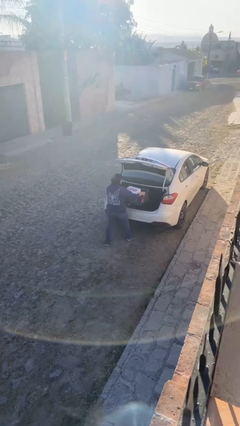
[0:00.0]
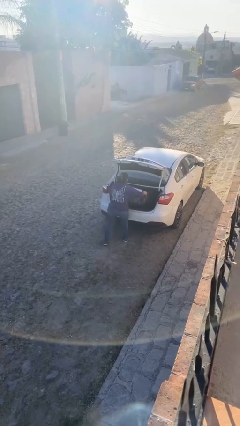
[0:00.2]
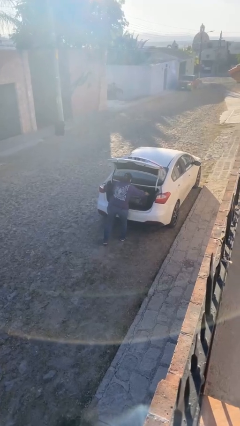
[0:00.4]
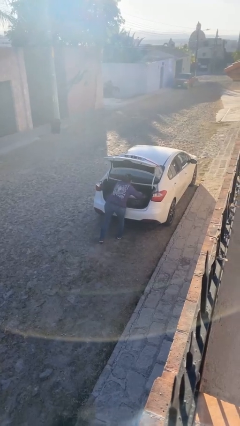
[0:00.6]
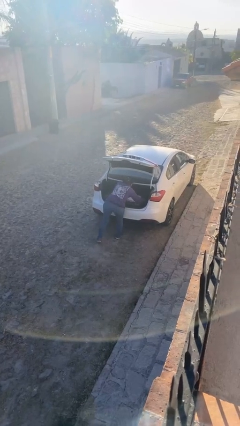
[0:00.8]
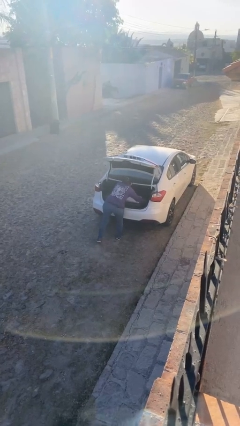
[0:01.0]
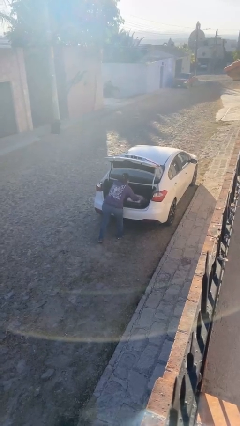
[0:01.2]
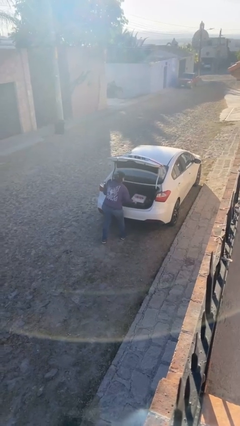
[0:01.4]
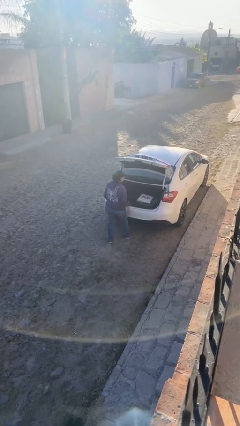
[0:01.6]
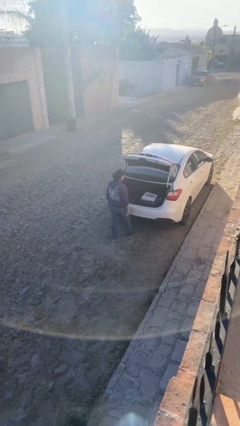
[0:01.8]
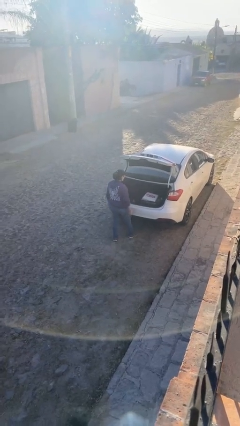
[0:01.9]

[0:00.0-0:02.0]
person loads car

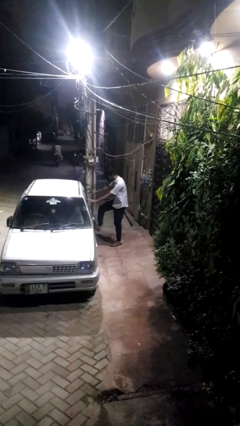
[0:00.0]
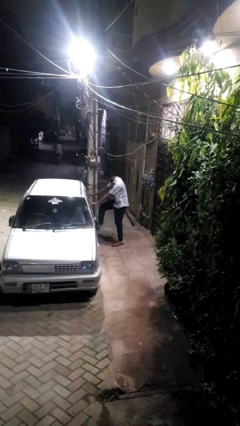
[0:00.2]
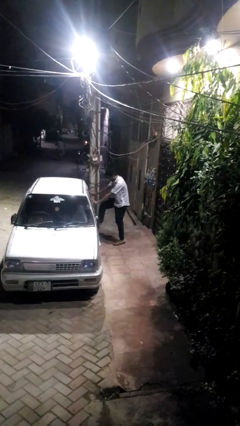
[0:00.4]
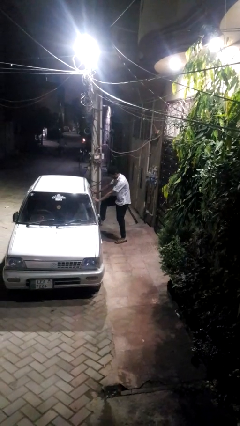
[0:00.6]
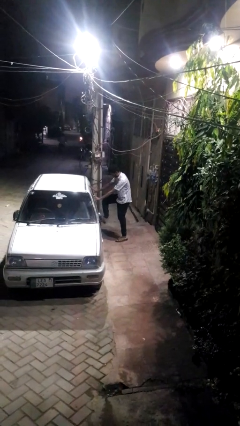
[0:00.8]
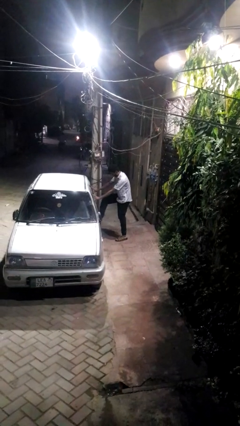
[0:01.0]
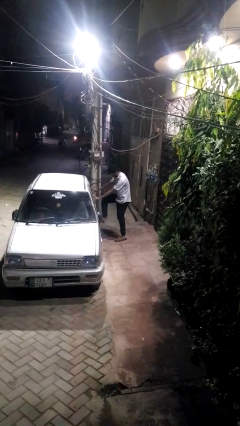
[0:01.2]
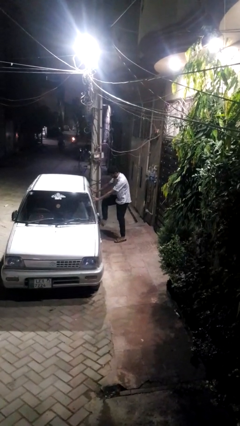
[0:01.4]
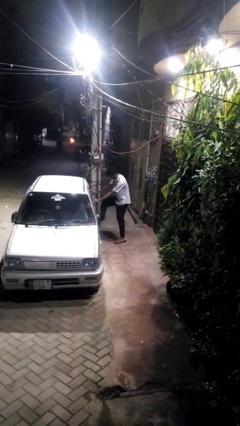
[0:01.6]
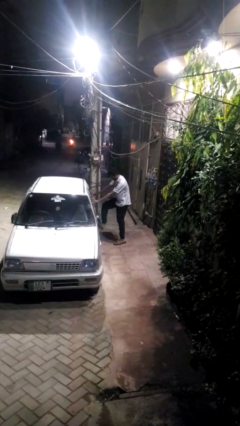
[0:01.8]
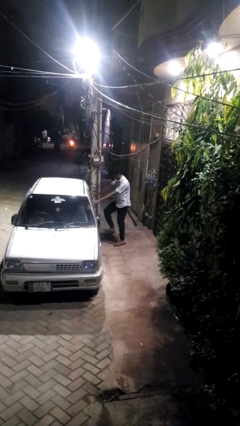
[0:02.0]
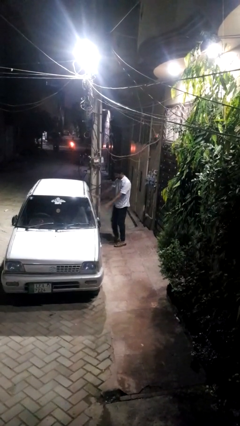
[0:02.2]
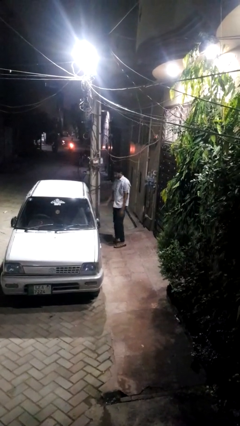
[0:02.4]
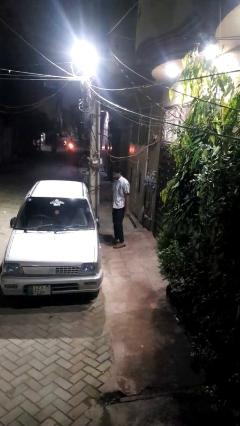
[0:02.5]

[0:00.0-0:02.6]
person kicks car tires

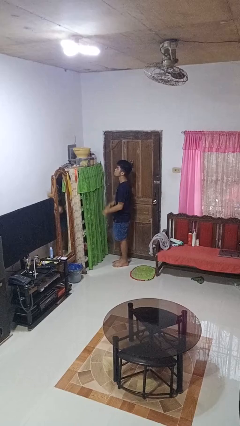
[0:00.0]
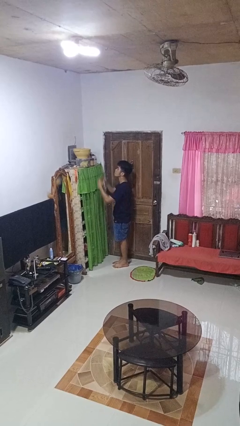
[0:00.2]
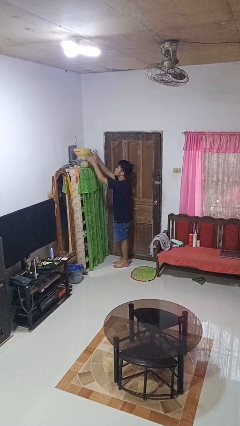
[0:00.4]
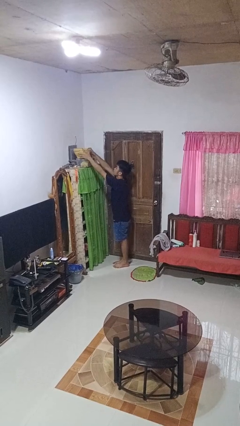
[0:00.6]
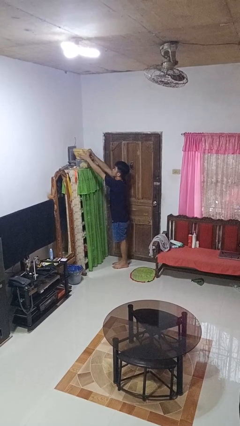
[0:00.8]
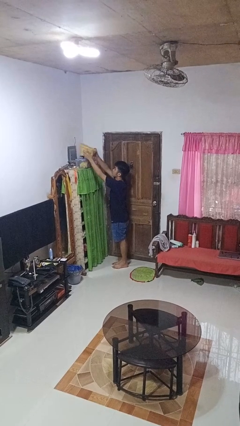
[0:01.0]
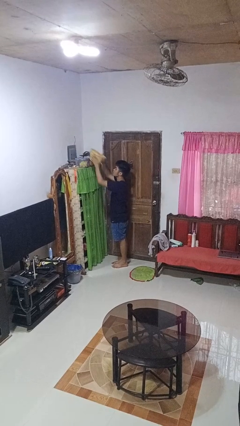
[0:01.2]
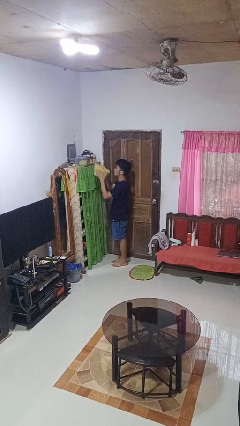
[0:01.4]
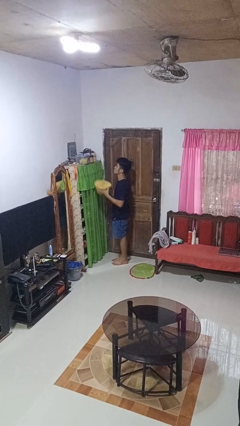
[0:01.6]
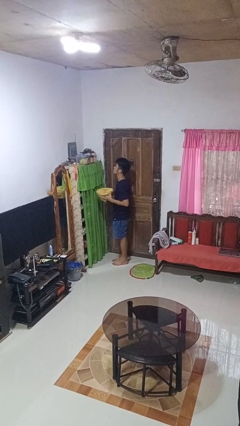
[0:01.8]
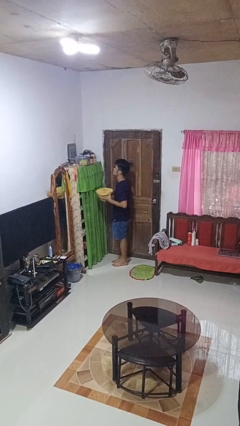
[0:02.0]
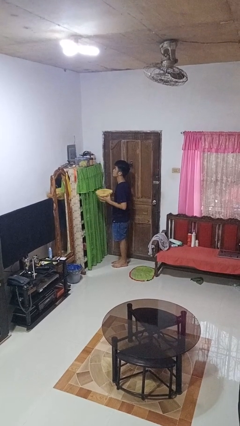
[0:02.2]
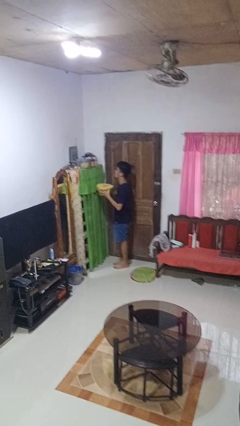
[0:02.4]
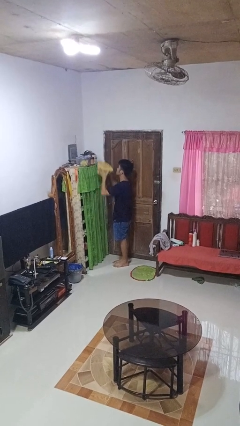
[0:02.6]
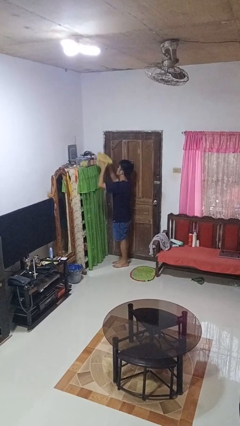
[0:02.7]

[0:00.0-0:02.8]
person picks up object from shelf

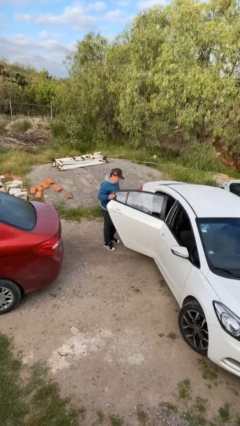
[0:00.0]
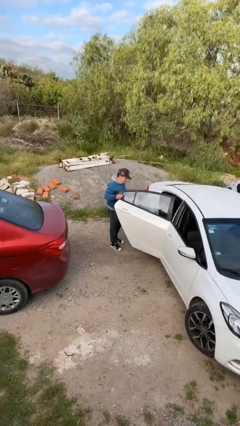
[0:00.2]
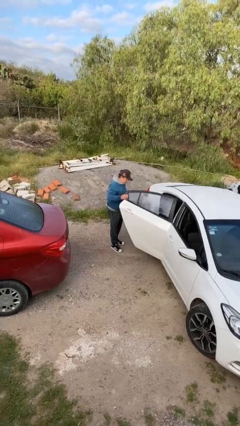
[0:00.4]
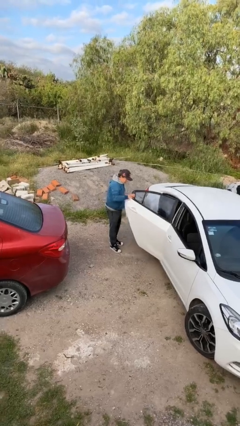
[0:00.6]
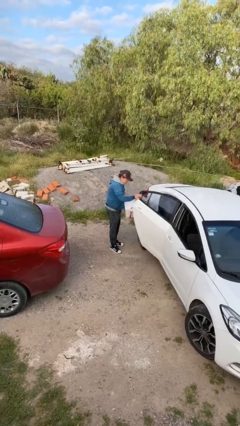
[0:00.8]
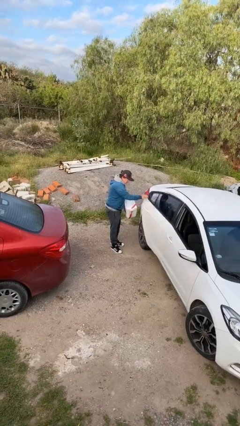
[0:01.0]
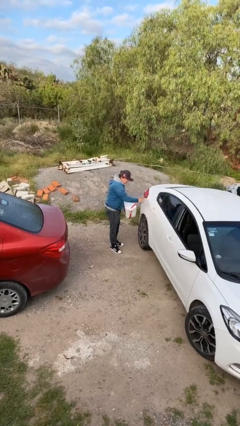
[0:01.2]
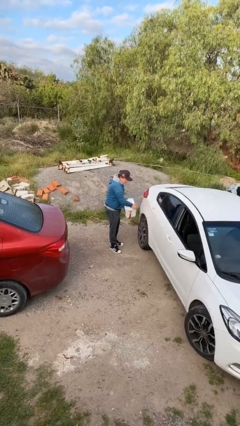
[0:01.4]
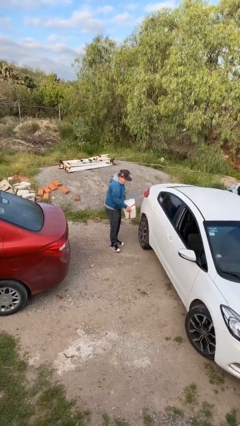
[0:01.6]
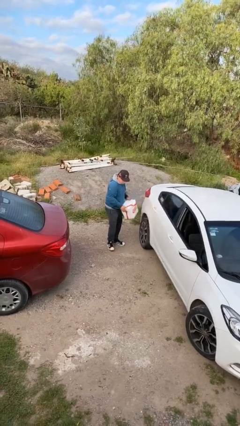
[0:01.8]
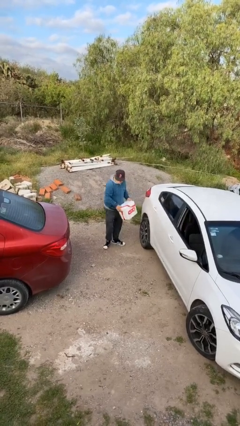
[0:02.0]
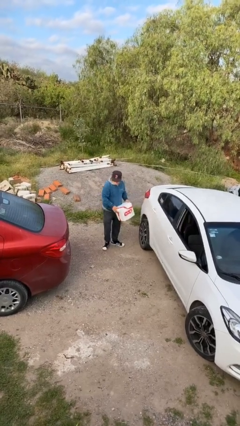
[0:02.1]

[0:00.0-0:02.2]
person closes car door

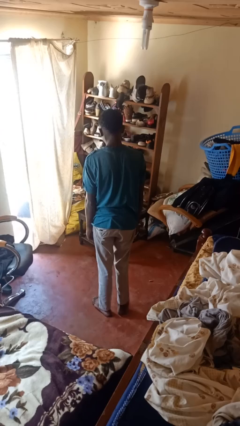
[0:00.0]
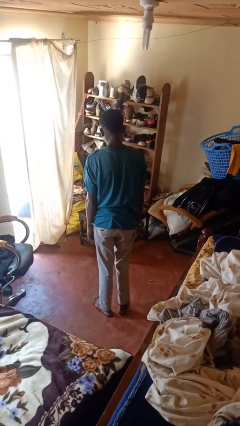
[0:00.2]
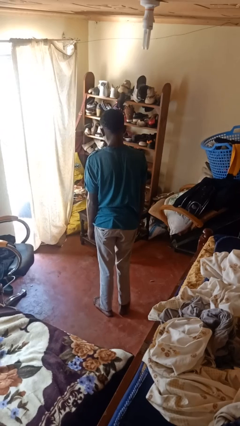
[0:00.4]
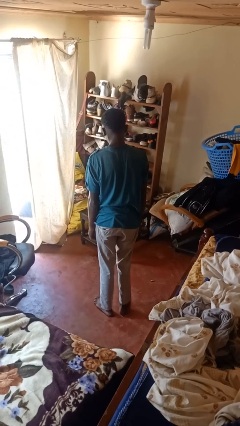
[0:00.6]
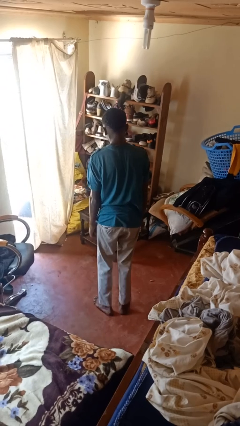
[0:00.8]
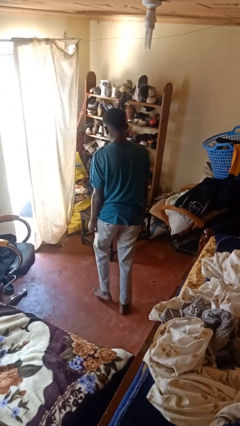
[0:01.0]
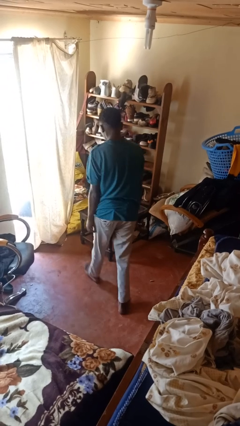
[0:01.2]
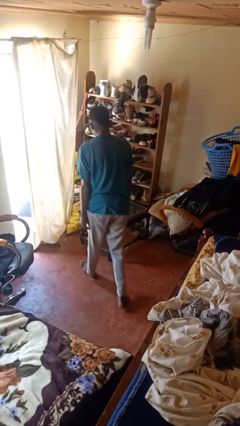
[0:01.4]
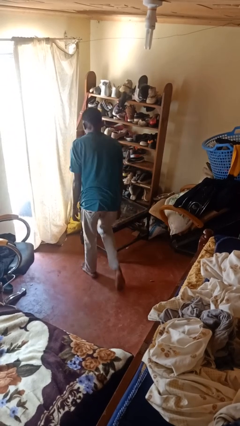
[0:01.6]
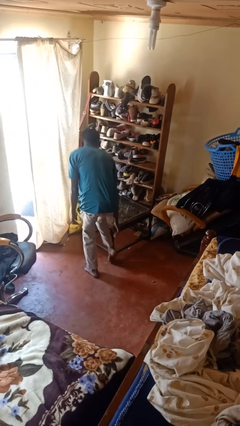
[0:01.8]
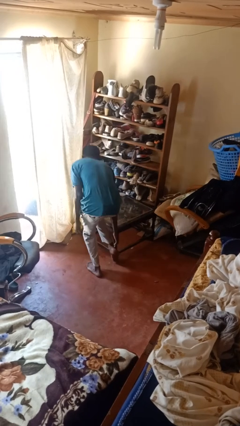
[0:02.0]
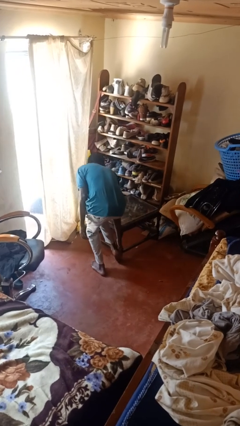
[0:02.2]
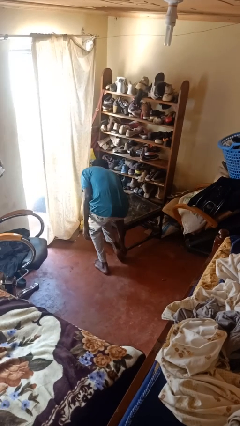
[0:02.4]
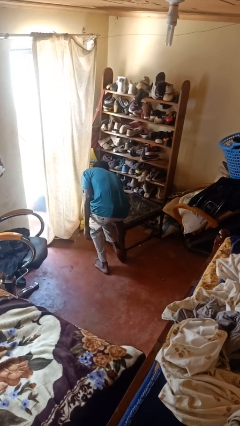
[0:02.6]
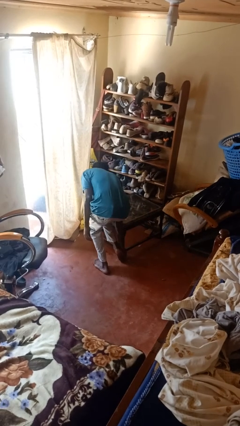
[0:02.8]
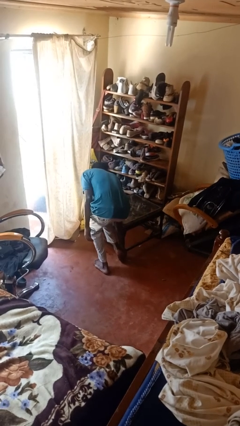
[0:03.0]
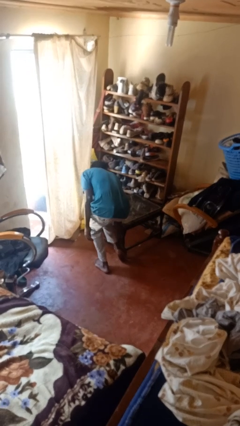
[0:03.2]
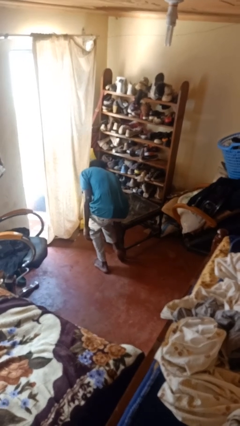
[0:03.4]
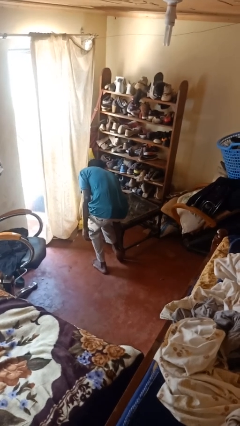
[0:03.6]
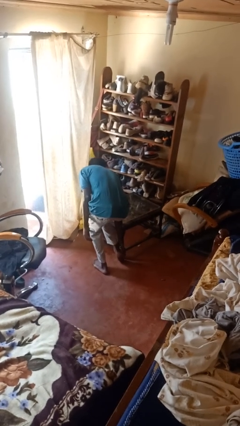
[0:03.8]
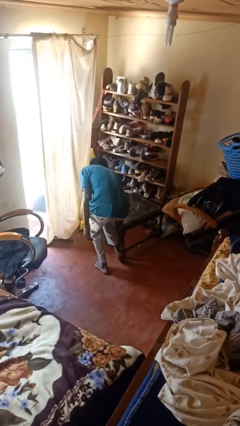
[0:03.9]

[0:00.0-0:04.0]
person stubs toe

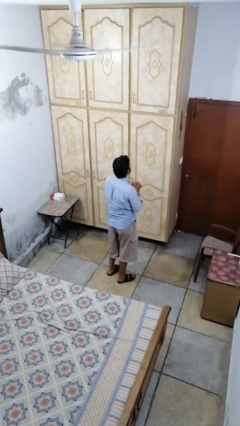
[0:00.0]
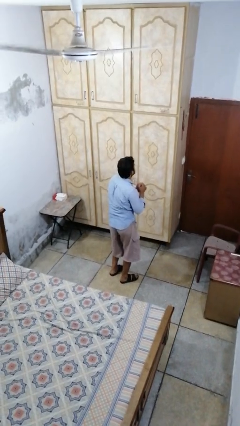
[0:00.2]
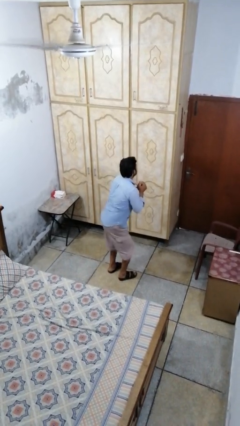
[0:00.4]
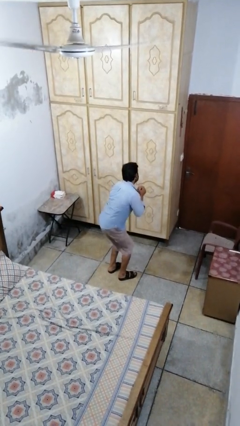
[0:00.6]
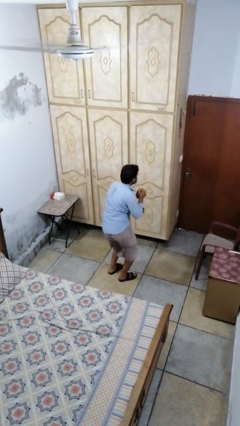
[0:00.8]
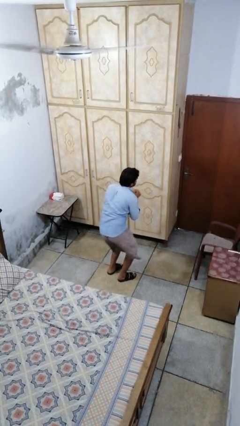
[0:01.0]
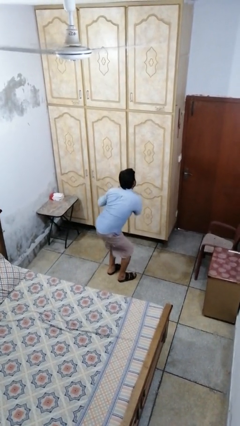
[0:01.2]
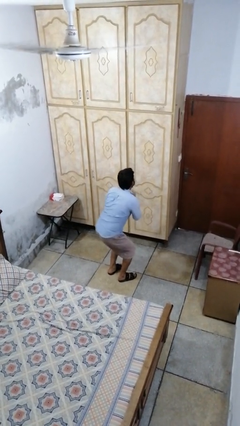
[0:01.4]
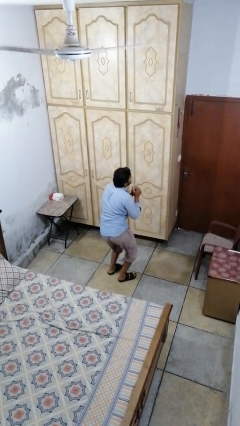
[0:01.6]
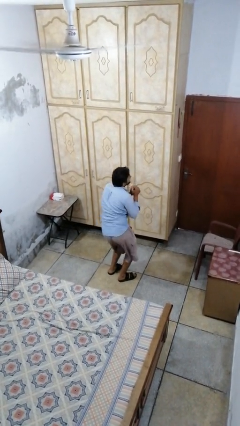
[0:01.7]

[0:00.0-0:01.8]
person wiggles hips

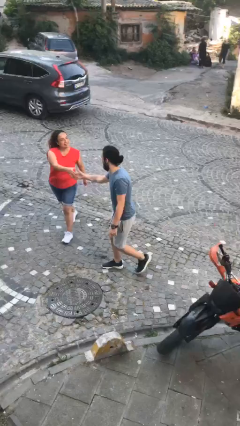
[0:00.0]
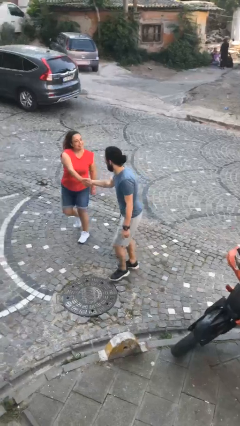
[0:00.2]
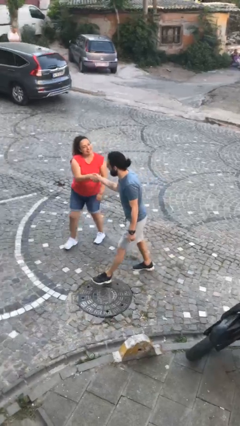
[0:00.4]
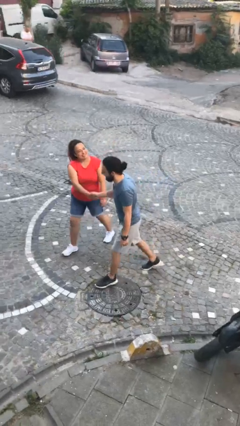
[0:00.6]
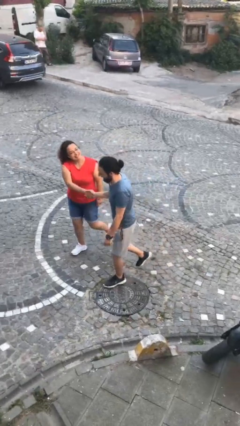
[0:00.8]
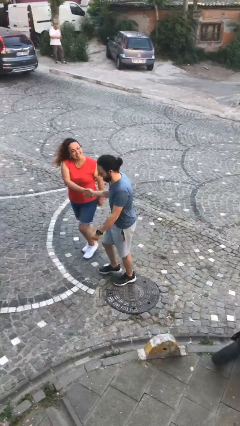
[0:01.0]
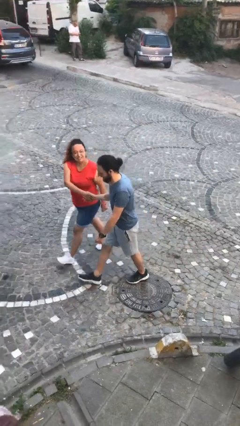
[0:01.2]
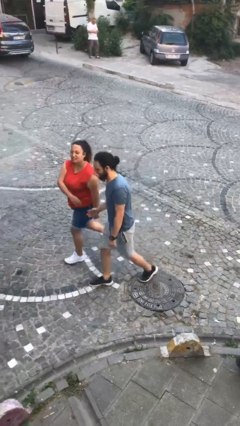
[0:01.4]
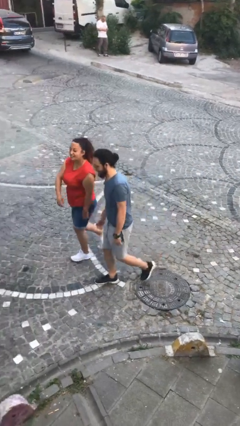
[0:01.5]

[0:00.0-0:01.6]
person shakes hand
